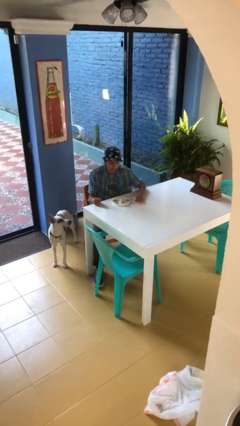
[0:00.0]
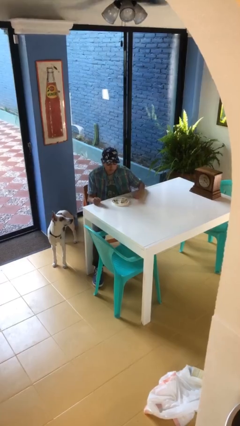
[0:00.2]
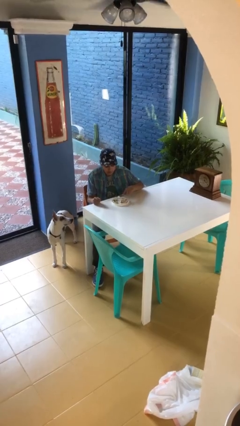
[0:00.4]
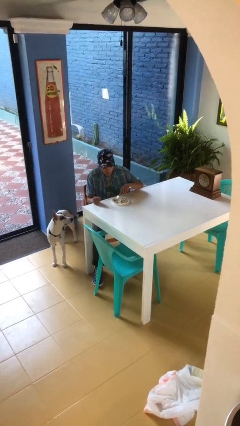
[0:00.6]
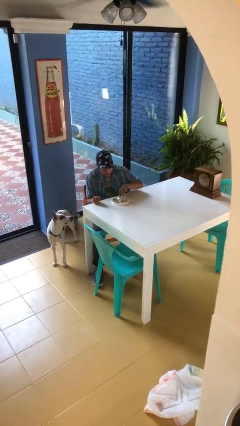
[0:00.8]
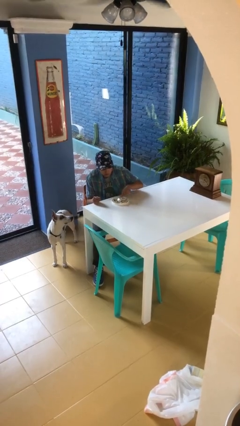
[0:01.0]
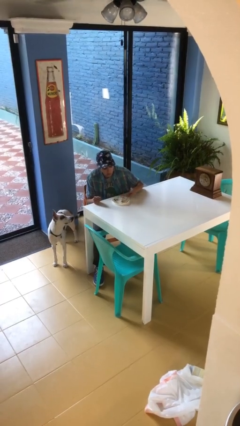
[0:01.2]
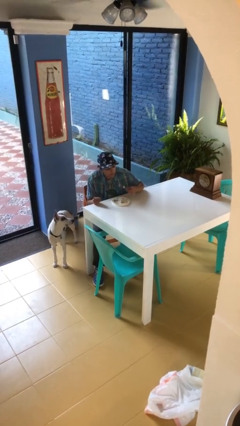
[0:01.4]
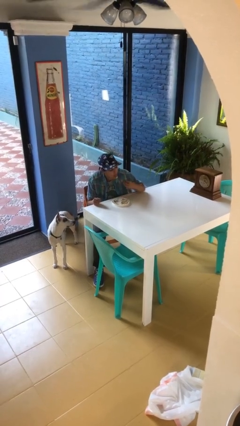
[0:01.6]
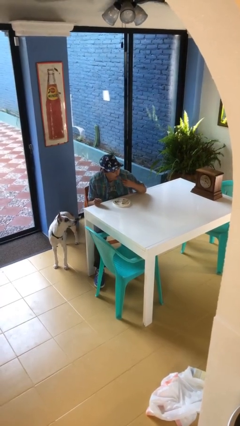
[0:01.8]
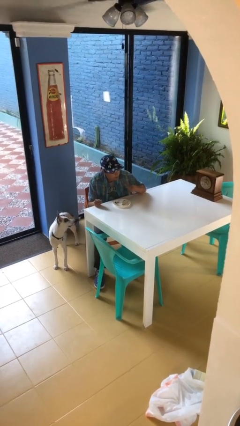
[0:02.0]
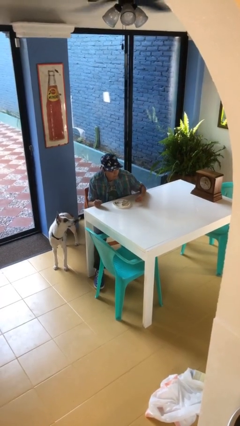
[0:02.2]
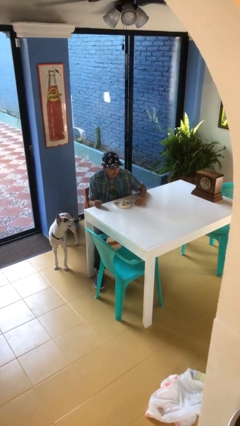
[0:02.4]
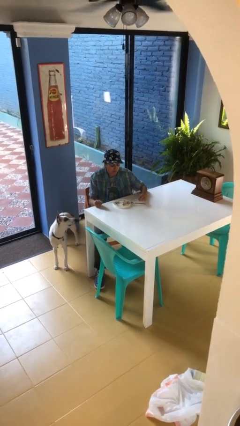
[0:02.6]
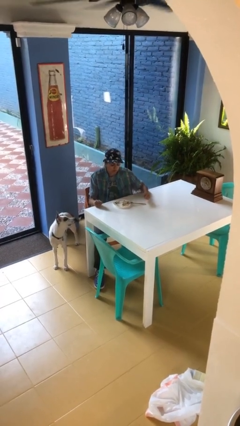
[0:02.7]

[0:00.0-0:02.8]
person eats with utensil

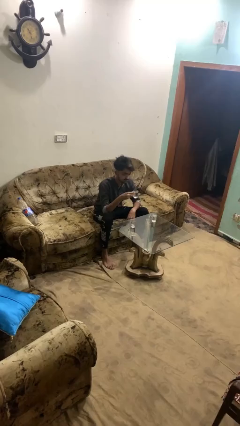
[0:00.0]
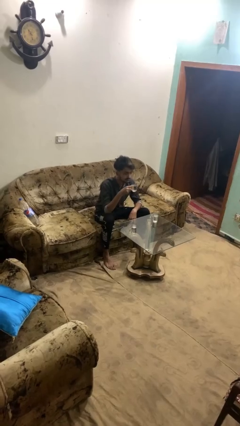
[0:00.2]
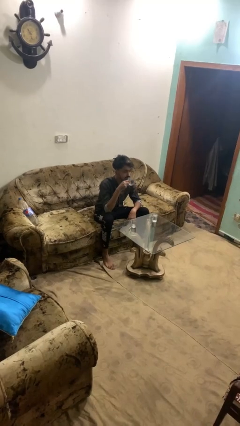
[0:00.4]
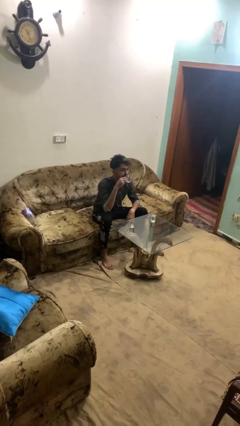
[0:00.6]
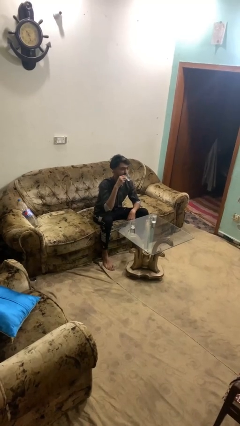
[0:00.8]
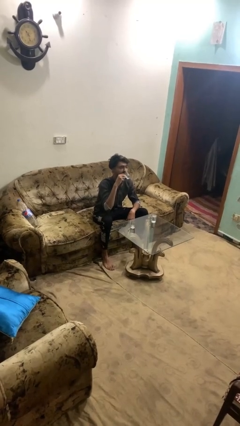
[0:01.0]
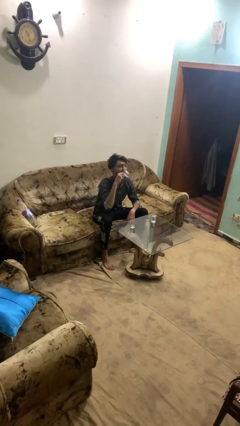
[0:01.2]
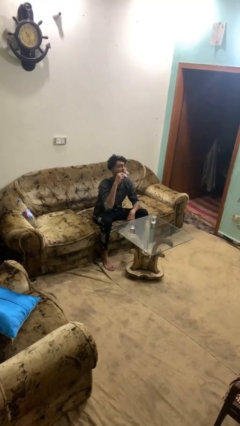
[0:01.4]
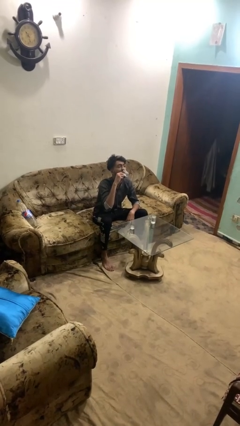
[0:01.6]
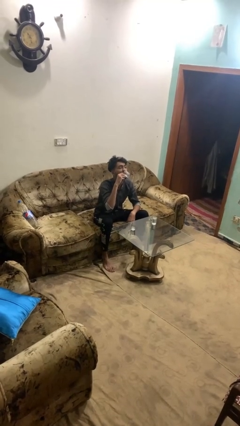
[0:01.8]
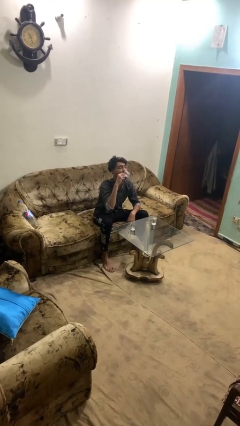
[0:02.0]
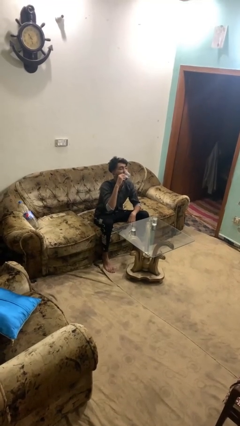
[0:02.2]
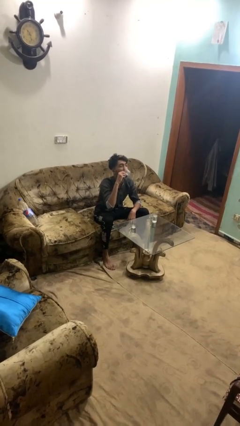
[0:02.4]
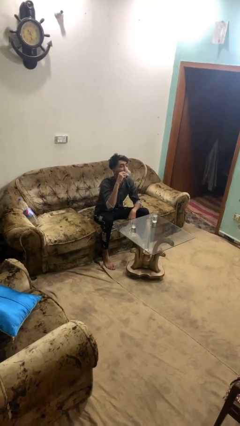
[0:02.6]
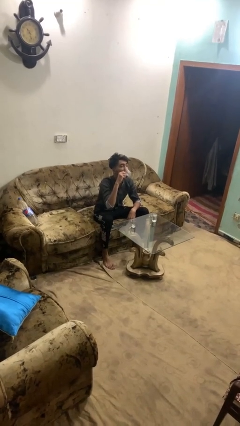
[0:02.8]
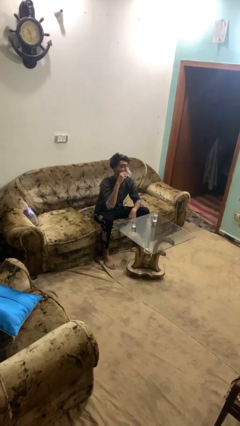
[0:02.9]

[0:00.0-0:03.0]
person drinks from shotglass

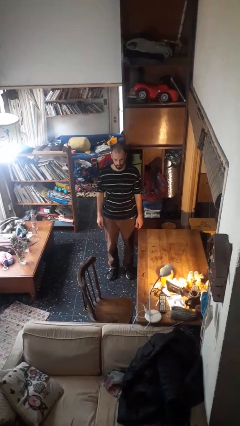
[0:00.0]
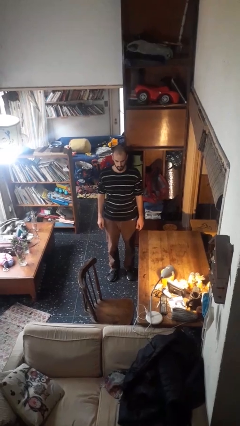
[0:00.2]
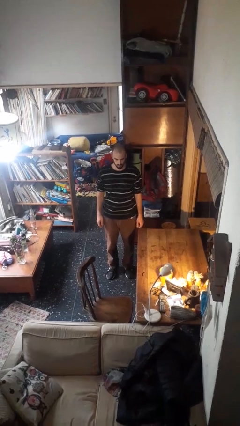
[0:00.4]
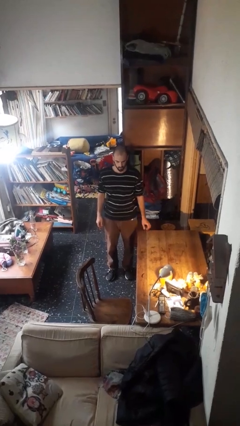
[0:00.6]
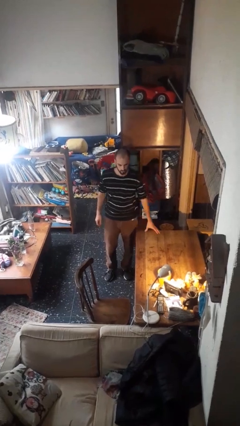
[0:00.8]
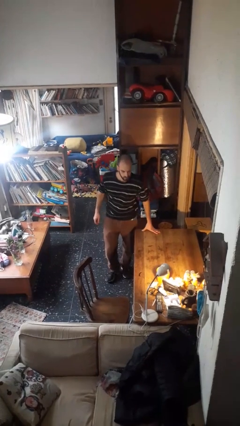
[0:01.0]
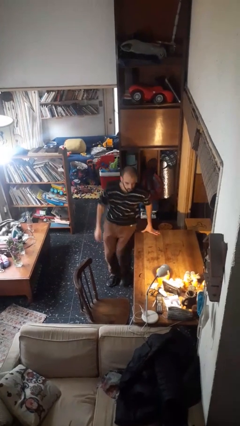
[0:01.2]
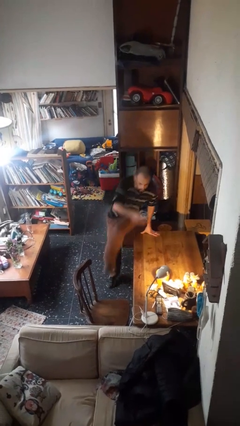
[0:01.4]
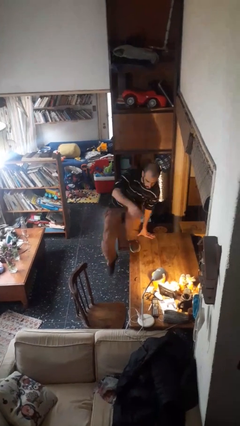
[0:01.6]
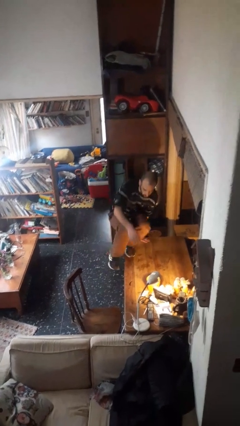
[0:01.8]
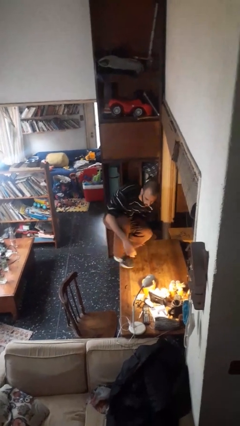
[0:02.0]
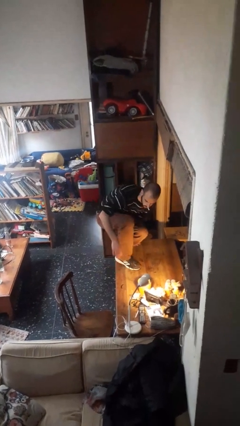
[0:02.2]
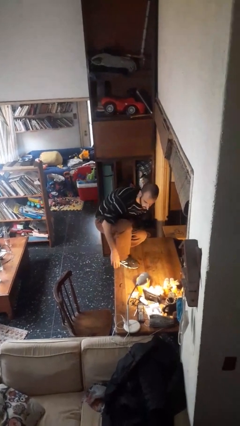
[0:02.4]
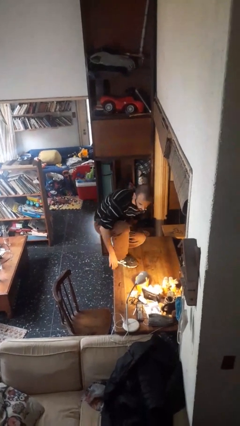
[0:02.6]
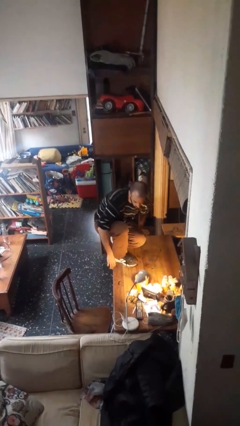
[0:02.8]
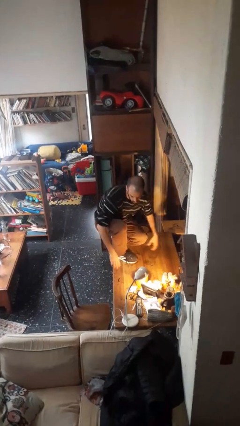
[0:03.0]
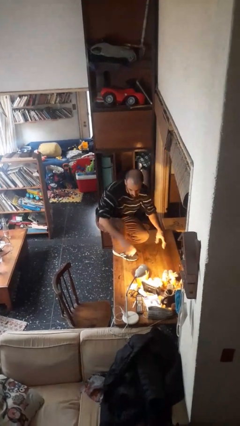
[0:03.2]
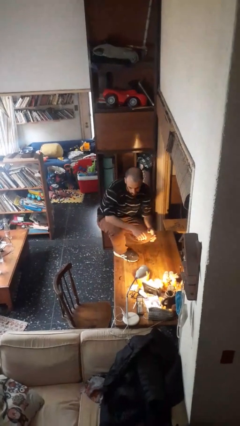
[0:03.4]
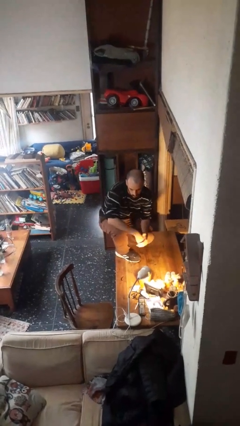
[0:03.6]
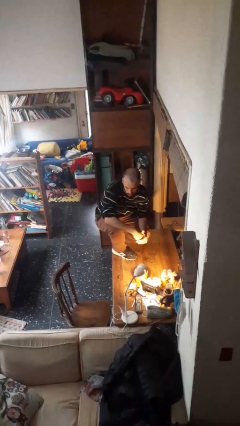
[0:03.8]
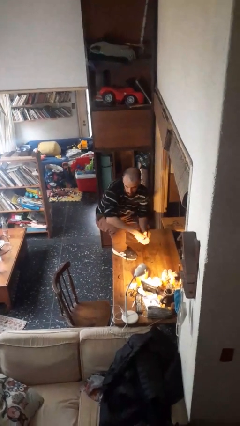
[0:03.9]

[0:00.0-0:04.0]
person climbs on table

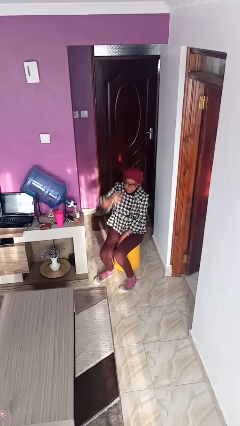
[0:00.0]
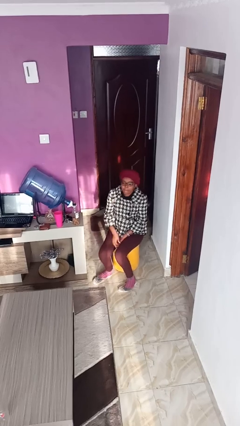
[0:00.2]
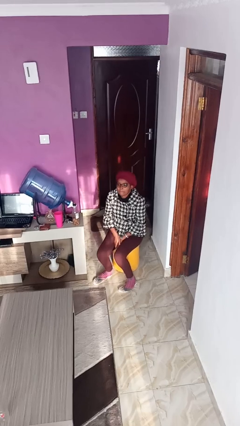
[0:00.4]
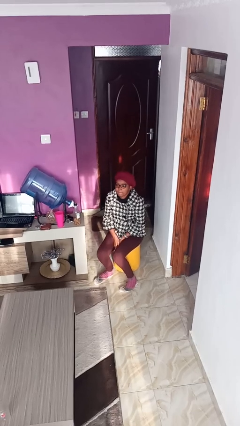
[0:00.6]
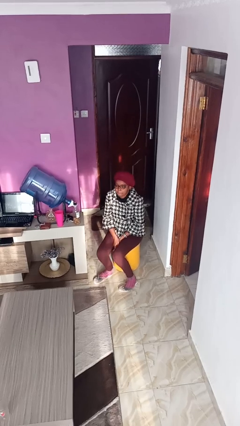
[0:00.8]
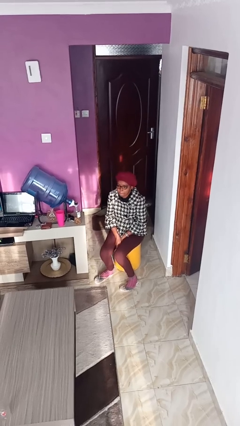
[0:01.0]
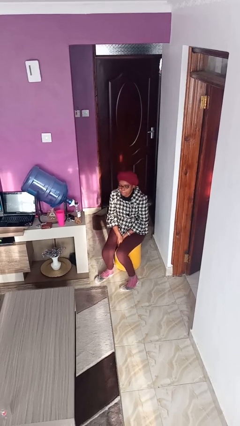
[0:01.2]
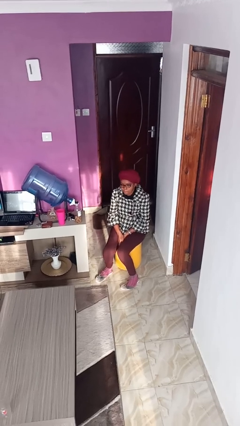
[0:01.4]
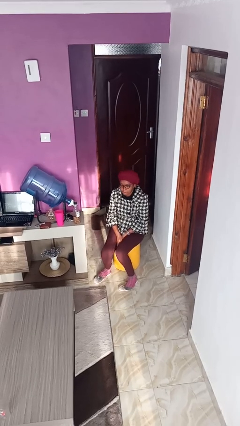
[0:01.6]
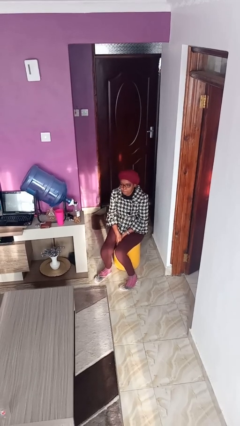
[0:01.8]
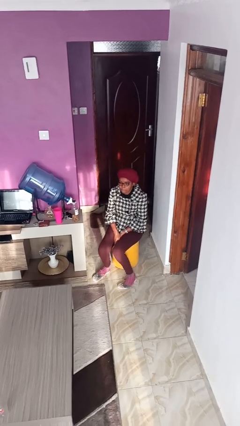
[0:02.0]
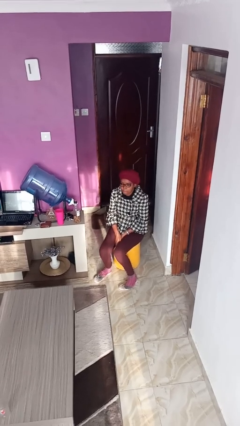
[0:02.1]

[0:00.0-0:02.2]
person gestures lower hand

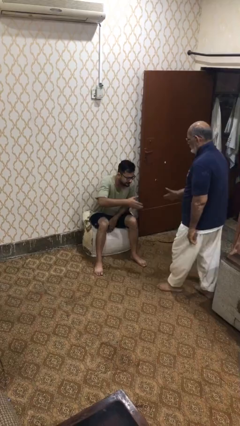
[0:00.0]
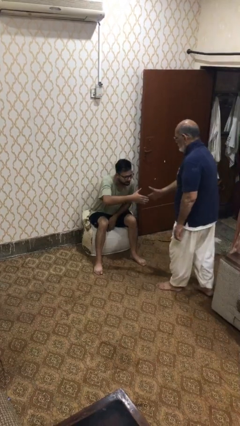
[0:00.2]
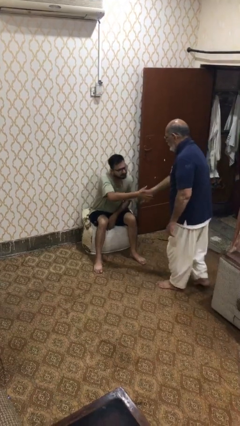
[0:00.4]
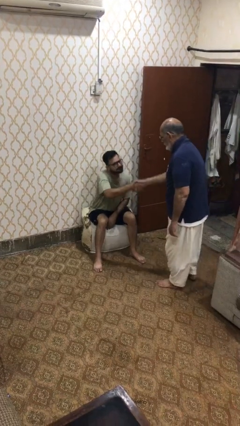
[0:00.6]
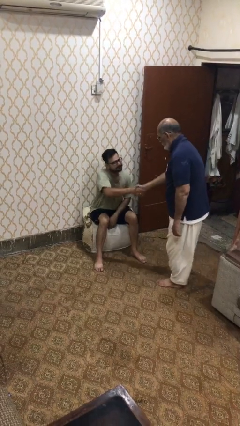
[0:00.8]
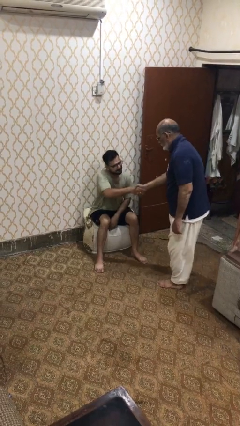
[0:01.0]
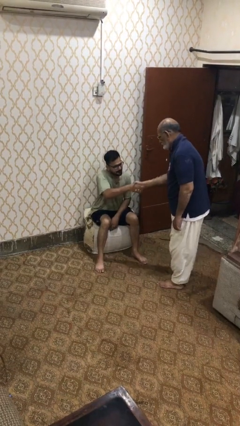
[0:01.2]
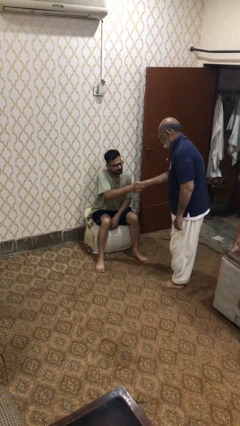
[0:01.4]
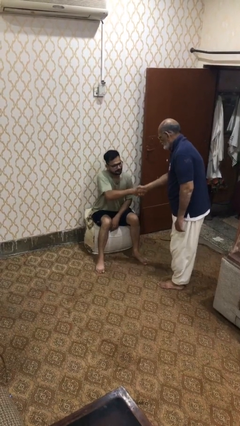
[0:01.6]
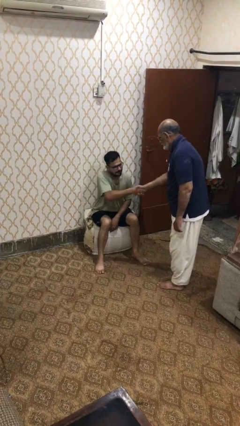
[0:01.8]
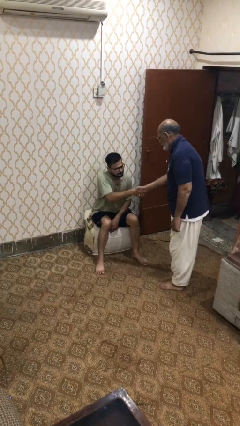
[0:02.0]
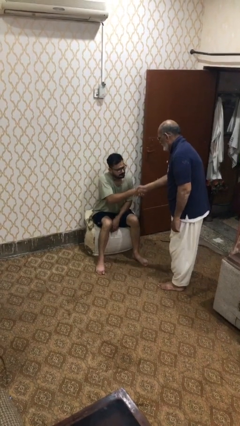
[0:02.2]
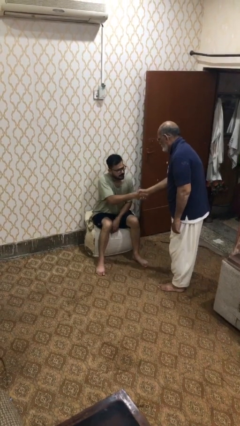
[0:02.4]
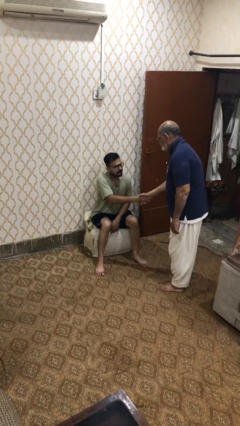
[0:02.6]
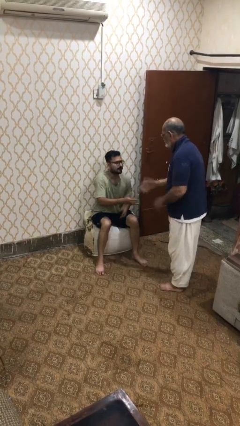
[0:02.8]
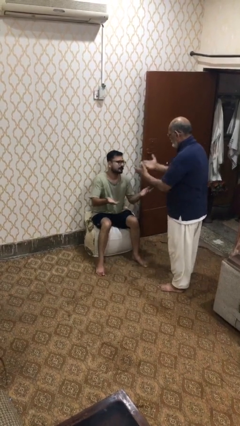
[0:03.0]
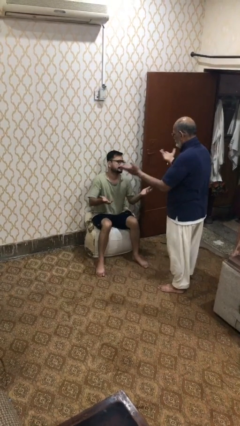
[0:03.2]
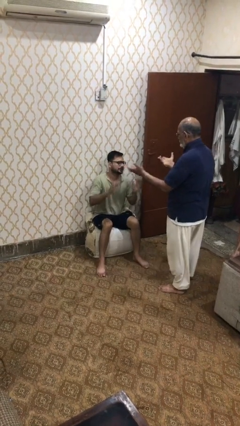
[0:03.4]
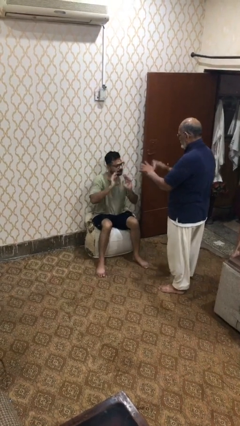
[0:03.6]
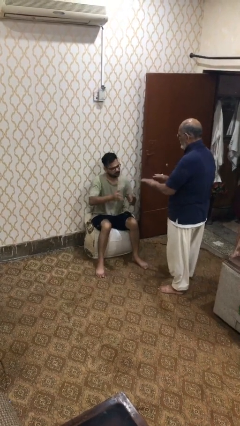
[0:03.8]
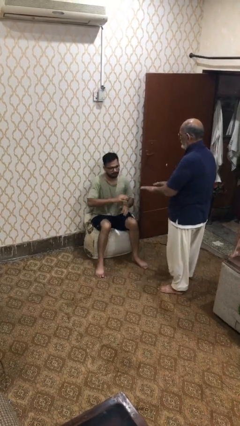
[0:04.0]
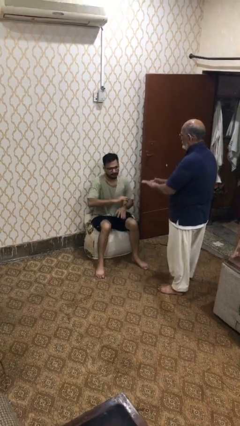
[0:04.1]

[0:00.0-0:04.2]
person shakes hand

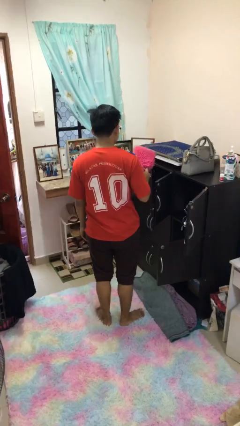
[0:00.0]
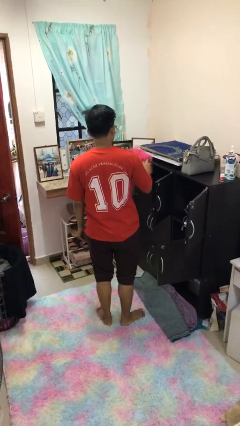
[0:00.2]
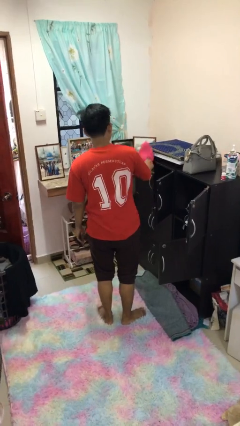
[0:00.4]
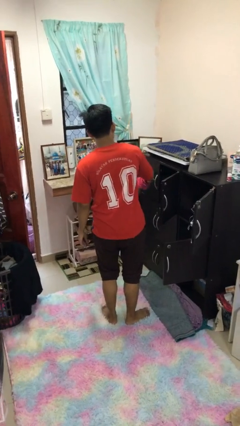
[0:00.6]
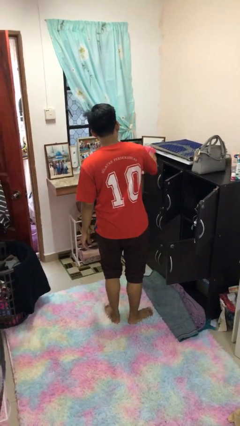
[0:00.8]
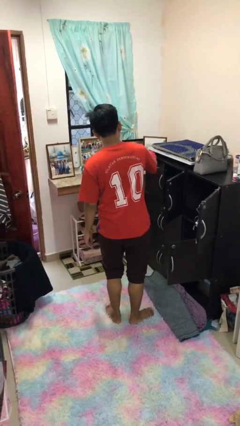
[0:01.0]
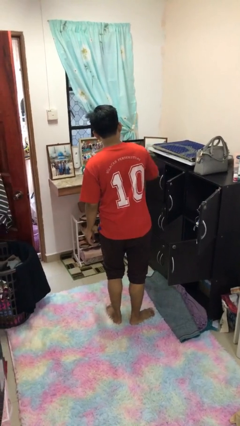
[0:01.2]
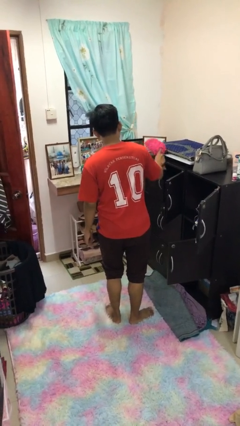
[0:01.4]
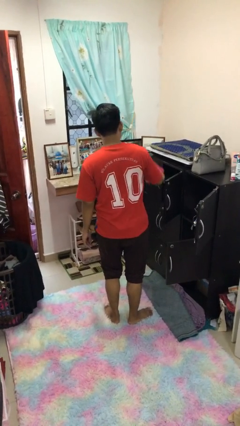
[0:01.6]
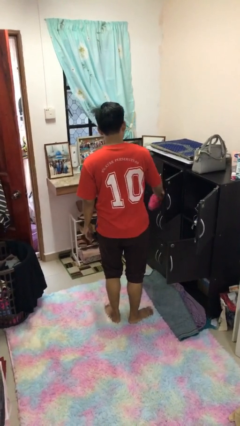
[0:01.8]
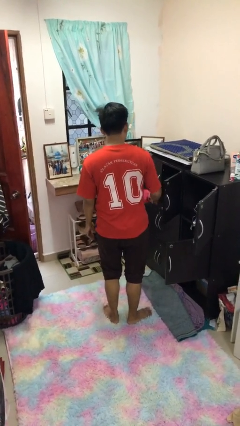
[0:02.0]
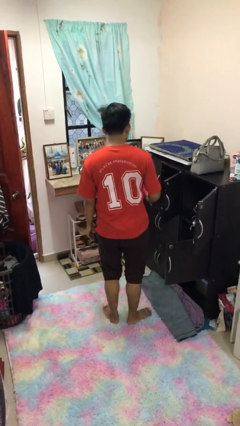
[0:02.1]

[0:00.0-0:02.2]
person dusts furniture
